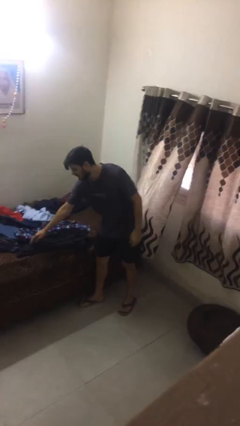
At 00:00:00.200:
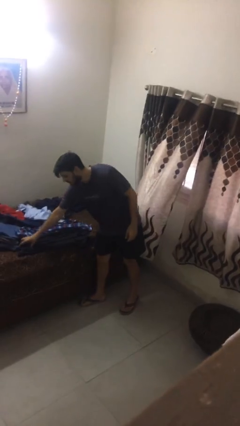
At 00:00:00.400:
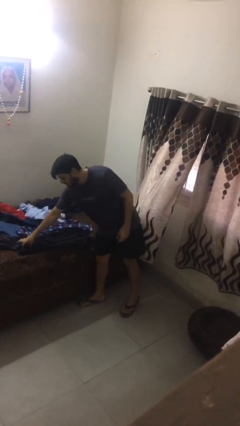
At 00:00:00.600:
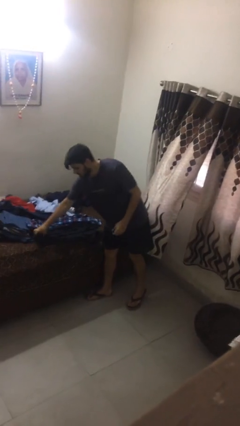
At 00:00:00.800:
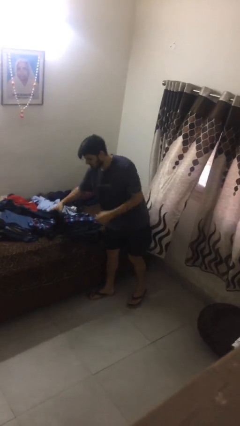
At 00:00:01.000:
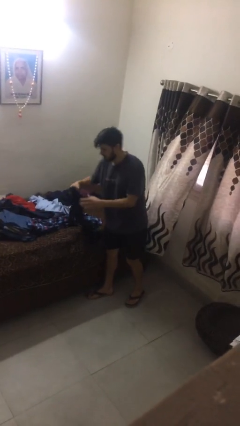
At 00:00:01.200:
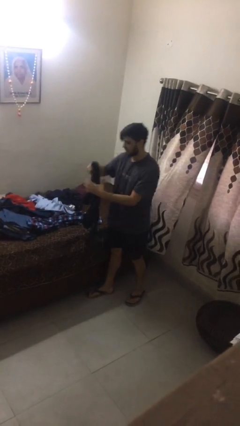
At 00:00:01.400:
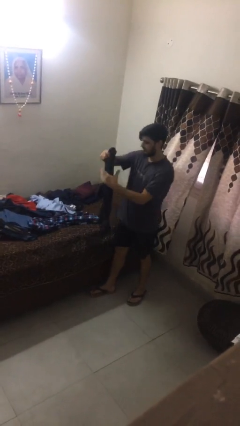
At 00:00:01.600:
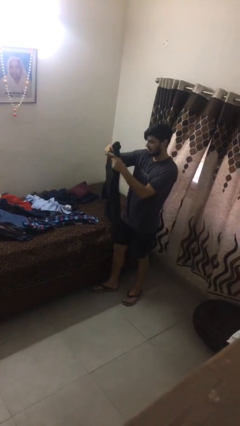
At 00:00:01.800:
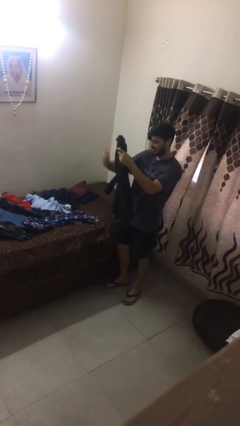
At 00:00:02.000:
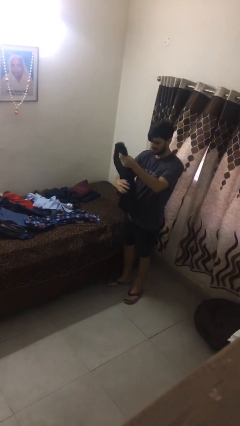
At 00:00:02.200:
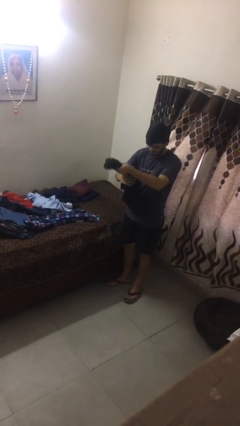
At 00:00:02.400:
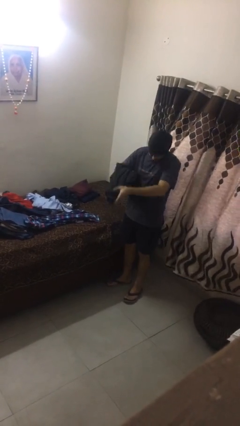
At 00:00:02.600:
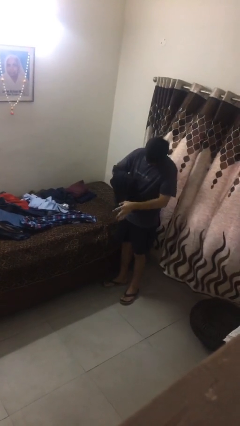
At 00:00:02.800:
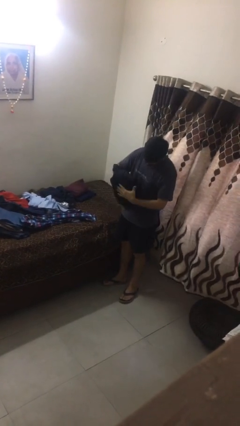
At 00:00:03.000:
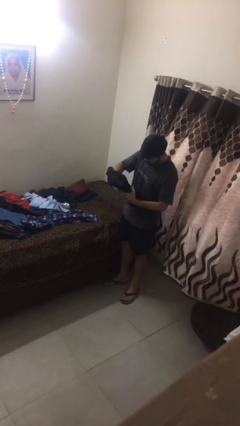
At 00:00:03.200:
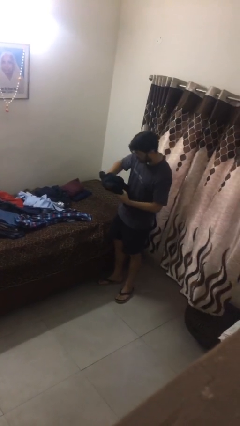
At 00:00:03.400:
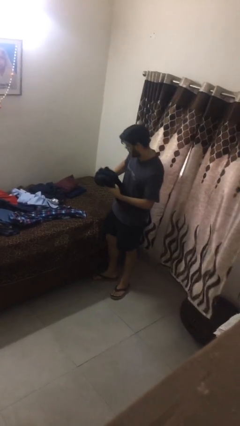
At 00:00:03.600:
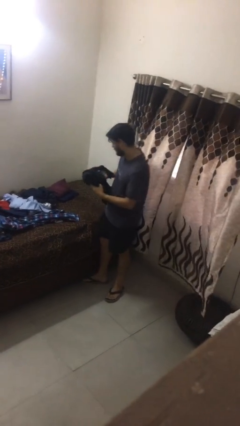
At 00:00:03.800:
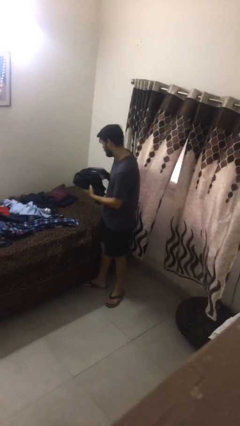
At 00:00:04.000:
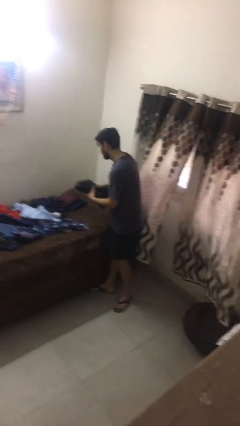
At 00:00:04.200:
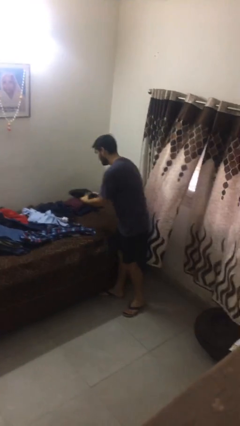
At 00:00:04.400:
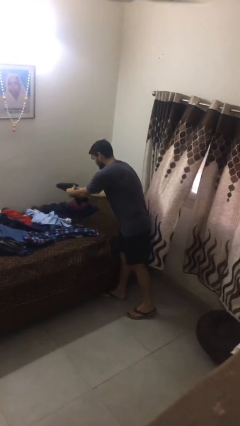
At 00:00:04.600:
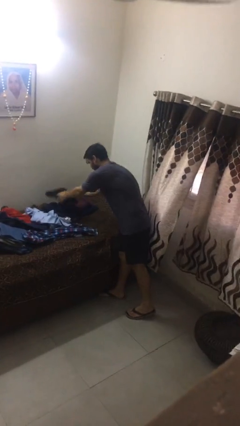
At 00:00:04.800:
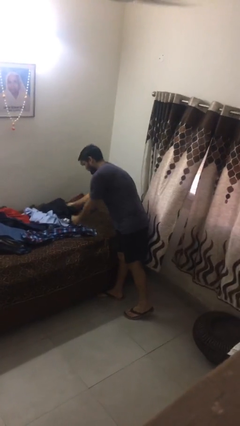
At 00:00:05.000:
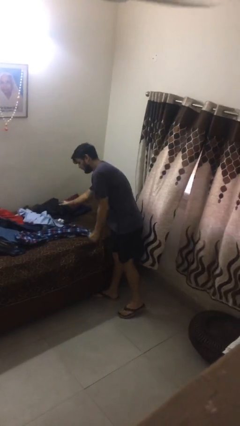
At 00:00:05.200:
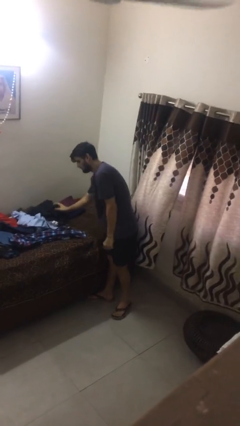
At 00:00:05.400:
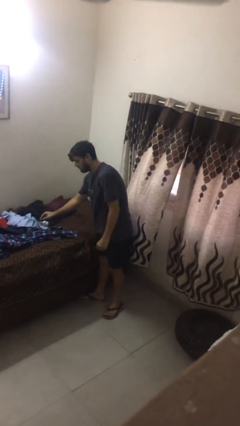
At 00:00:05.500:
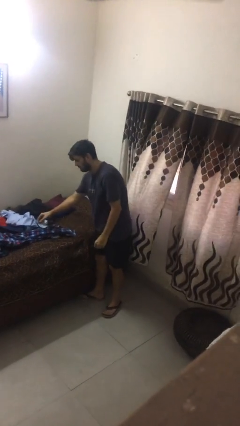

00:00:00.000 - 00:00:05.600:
person folds shirt

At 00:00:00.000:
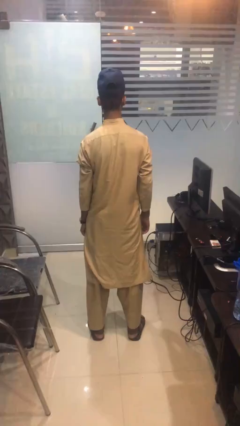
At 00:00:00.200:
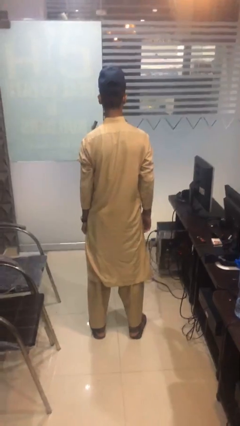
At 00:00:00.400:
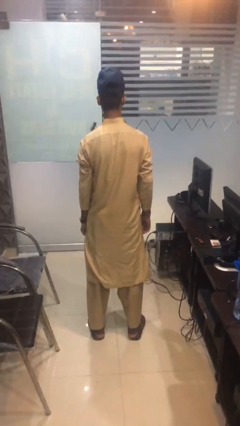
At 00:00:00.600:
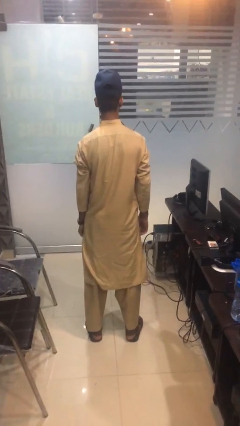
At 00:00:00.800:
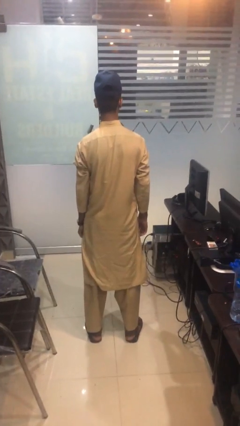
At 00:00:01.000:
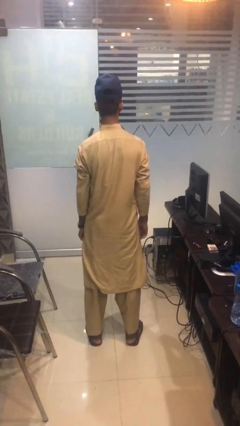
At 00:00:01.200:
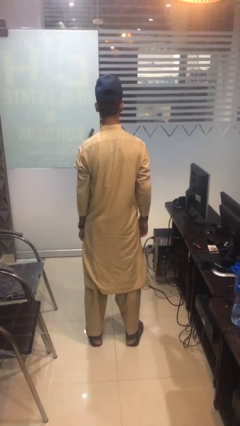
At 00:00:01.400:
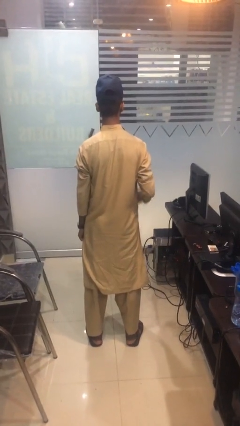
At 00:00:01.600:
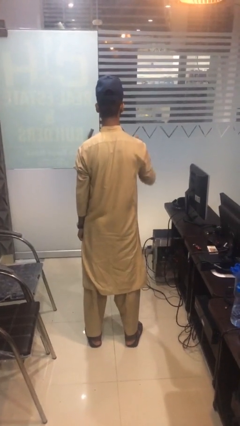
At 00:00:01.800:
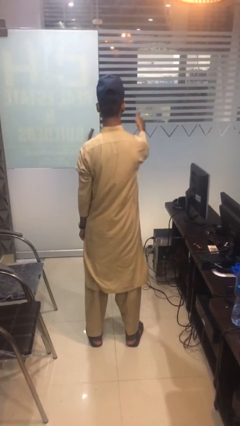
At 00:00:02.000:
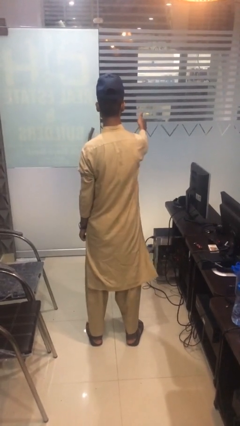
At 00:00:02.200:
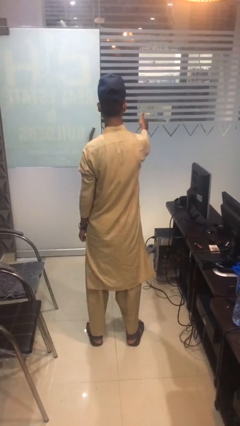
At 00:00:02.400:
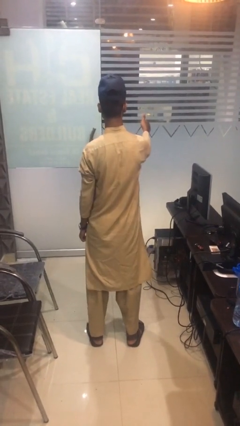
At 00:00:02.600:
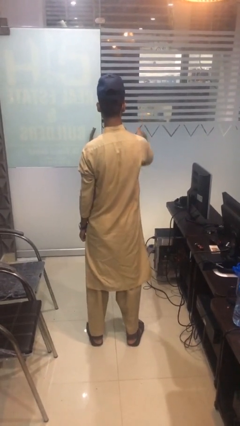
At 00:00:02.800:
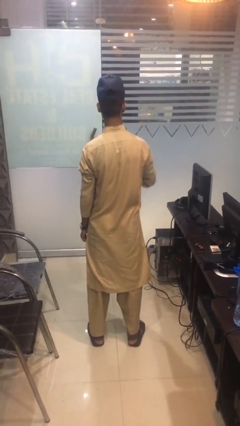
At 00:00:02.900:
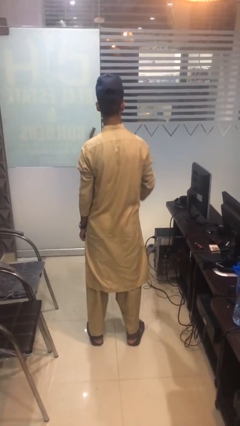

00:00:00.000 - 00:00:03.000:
person gestures thumbs up

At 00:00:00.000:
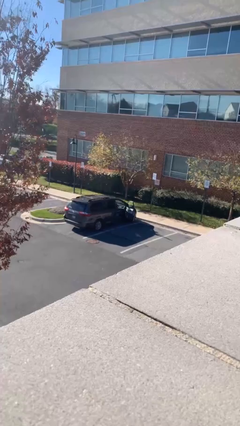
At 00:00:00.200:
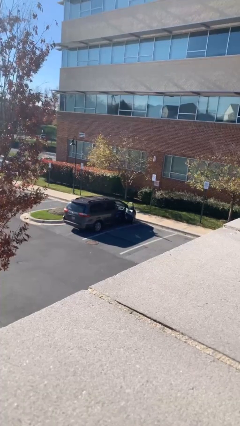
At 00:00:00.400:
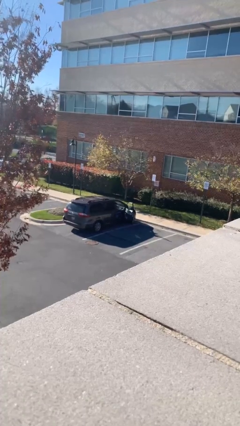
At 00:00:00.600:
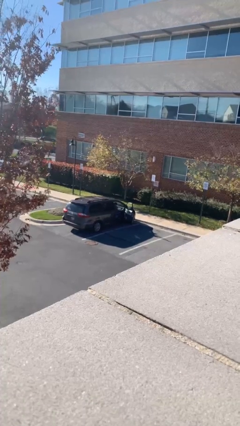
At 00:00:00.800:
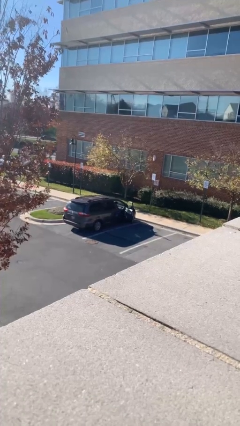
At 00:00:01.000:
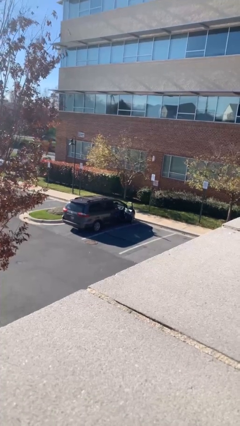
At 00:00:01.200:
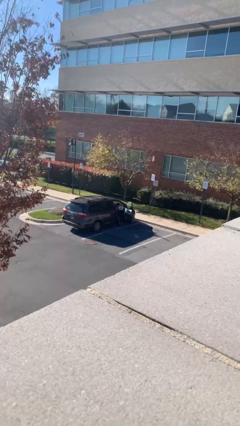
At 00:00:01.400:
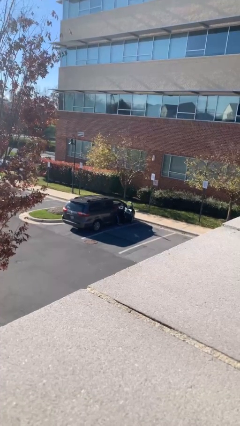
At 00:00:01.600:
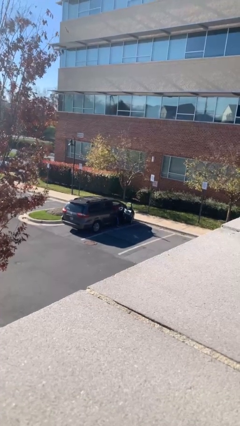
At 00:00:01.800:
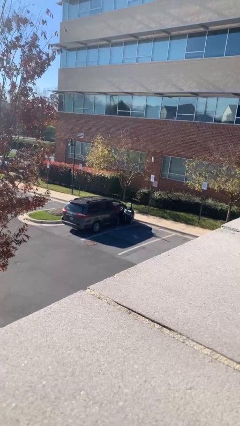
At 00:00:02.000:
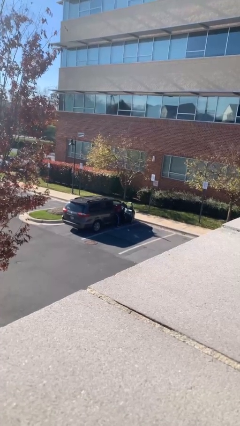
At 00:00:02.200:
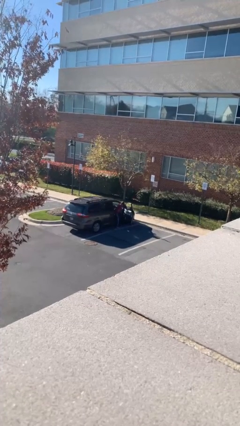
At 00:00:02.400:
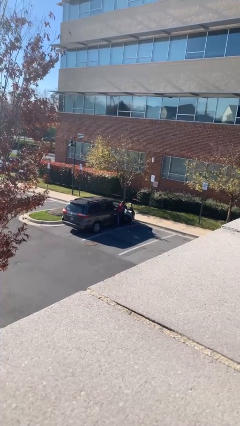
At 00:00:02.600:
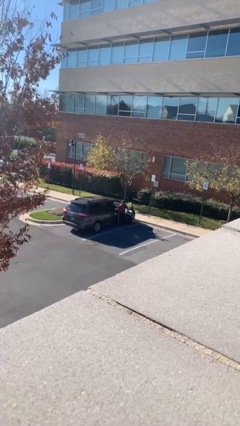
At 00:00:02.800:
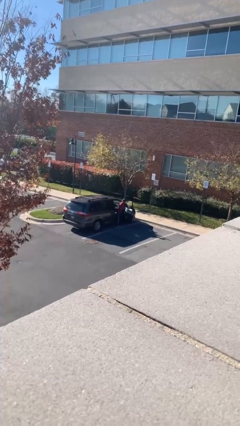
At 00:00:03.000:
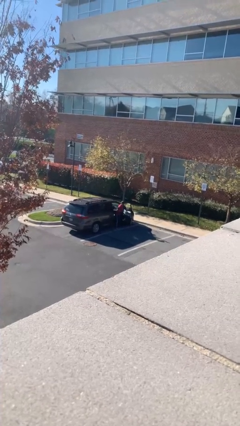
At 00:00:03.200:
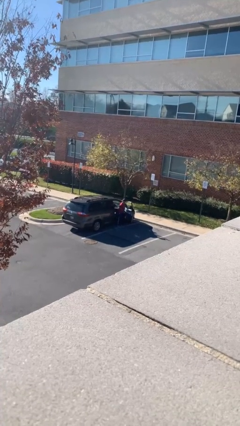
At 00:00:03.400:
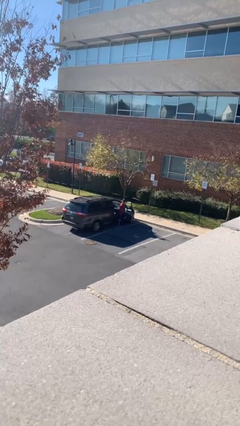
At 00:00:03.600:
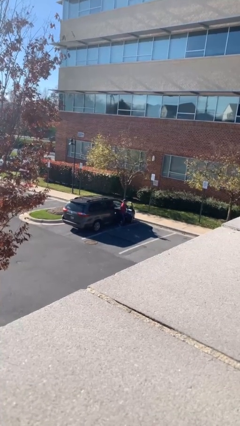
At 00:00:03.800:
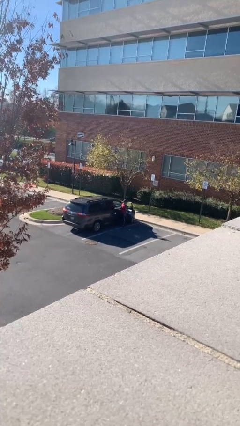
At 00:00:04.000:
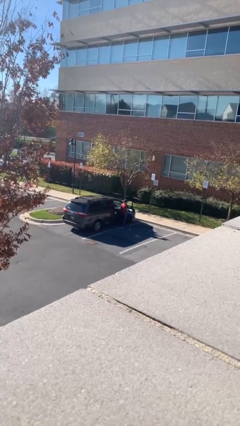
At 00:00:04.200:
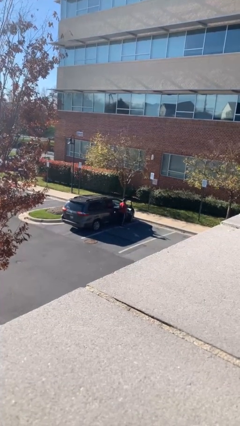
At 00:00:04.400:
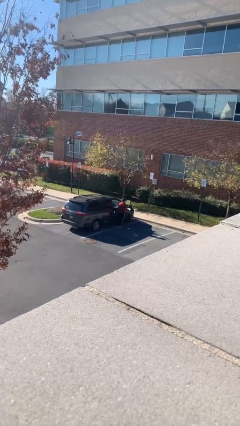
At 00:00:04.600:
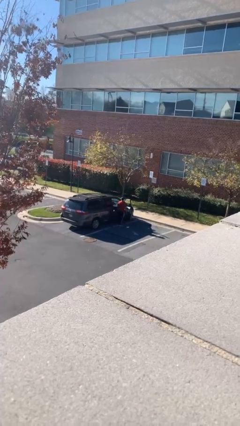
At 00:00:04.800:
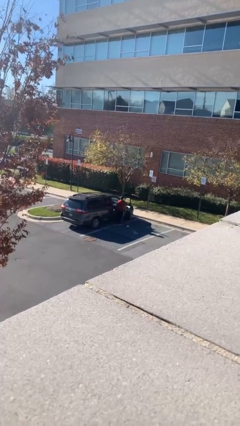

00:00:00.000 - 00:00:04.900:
person exits car

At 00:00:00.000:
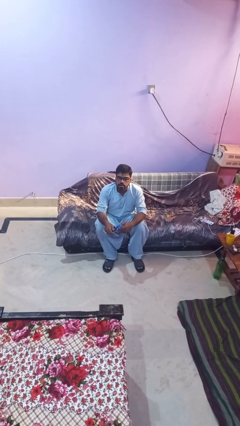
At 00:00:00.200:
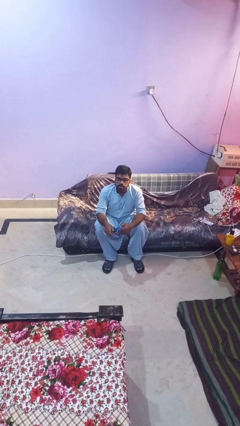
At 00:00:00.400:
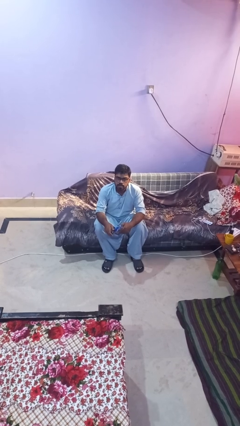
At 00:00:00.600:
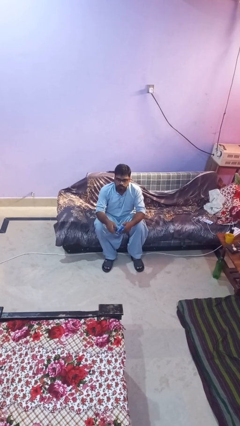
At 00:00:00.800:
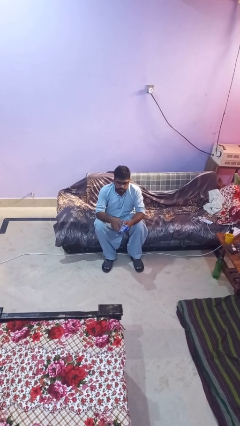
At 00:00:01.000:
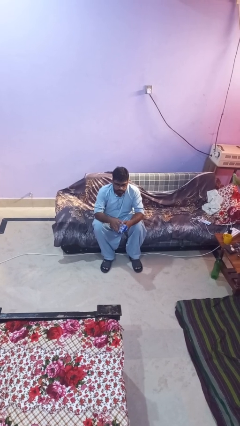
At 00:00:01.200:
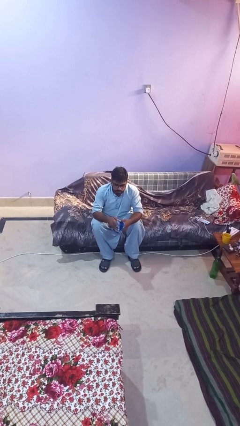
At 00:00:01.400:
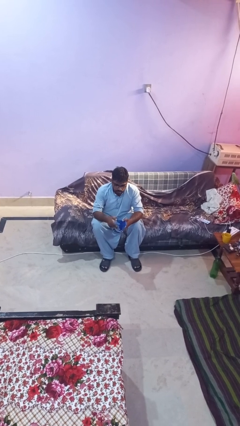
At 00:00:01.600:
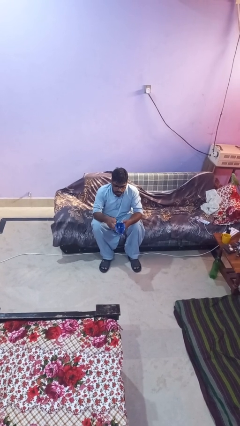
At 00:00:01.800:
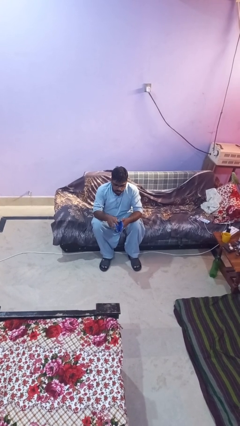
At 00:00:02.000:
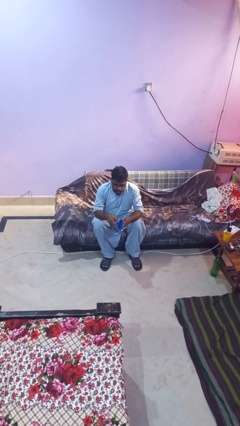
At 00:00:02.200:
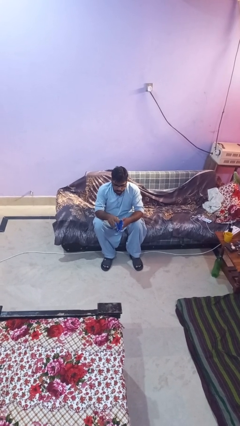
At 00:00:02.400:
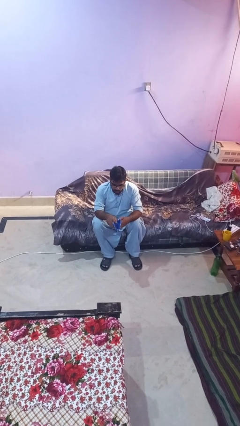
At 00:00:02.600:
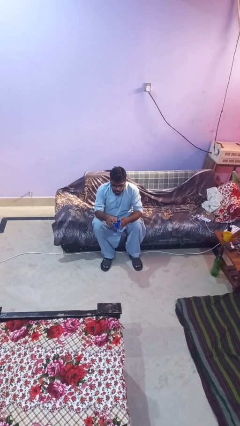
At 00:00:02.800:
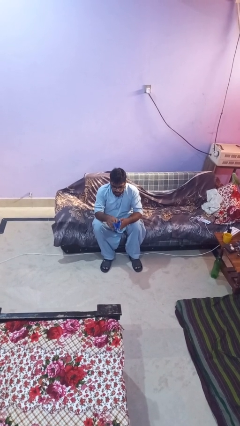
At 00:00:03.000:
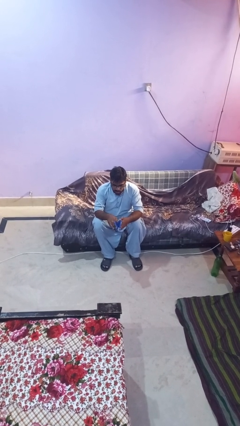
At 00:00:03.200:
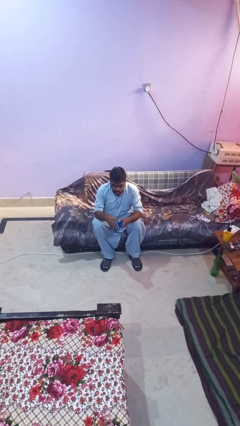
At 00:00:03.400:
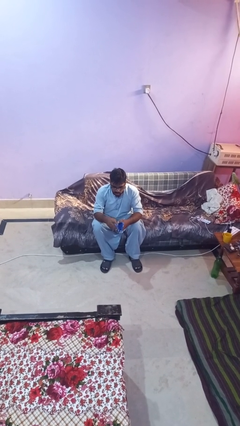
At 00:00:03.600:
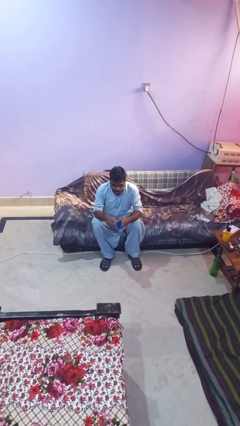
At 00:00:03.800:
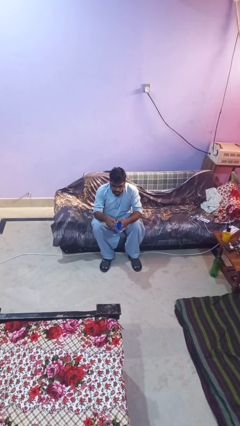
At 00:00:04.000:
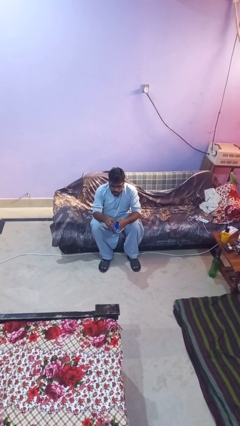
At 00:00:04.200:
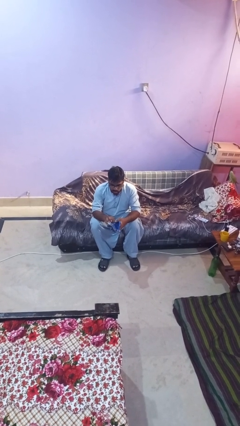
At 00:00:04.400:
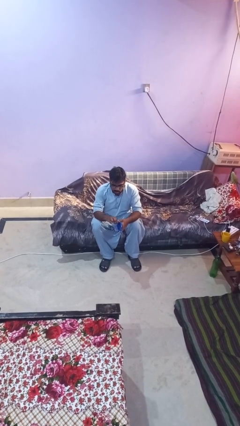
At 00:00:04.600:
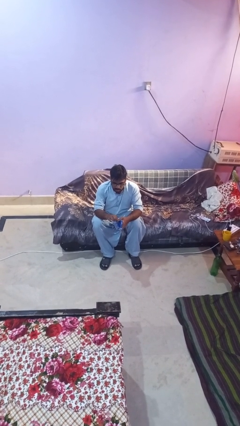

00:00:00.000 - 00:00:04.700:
person searches in purse
